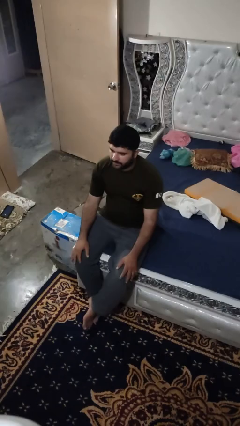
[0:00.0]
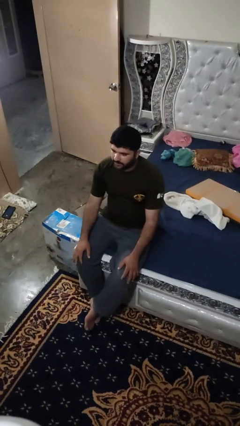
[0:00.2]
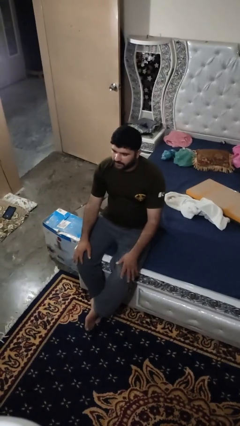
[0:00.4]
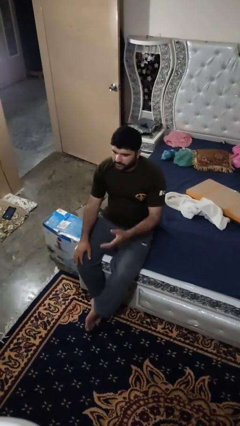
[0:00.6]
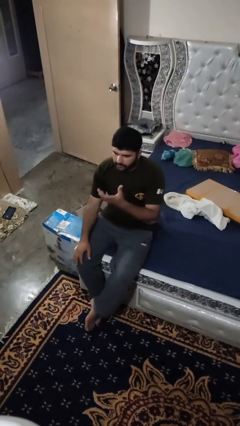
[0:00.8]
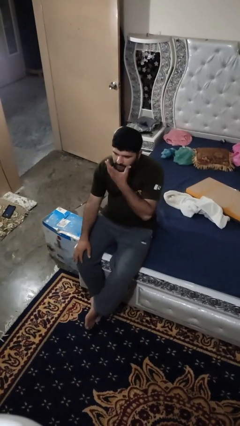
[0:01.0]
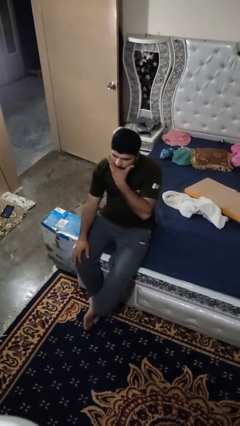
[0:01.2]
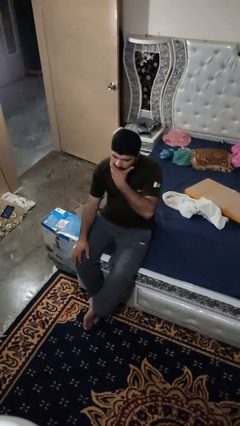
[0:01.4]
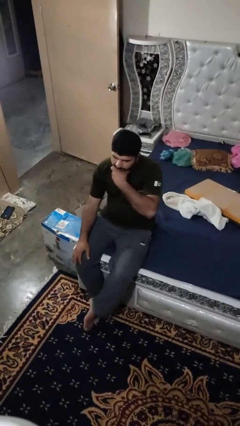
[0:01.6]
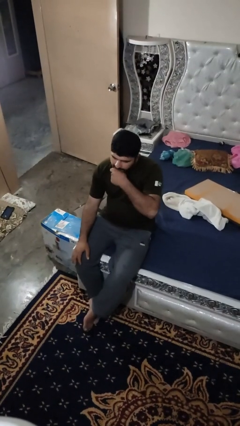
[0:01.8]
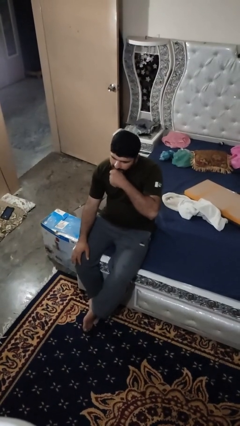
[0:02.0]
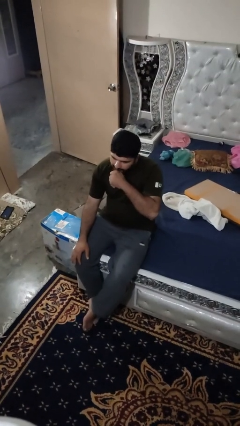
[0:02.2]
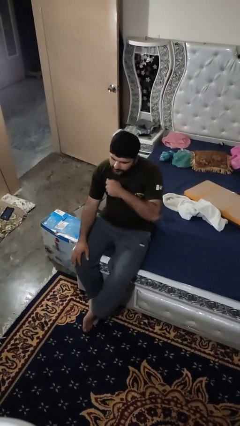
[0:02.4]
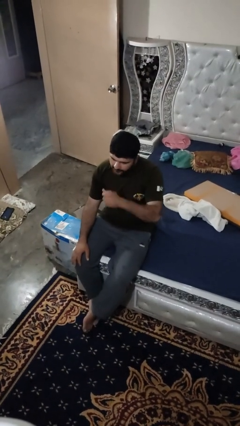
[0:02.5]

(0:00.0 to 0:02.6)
person strokes chin

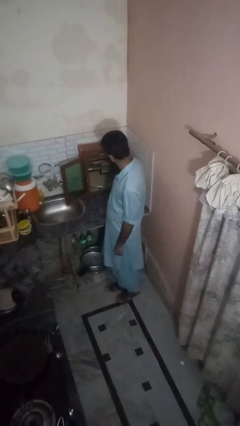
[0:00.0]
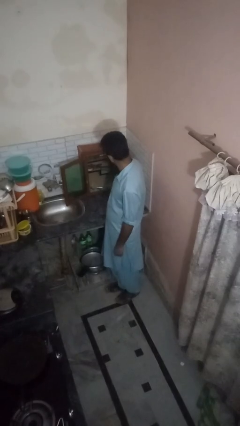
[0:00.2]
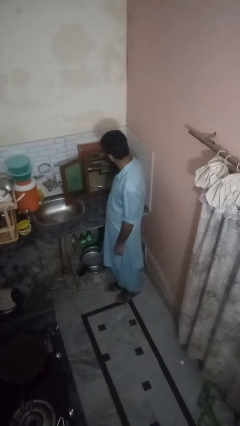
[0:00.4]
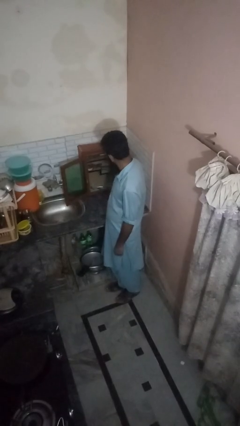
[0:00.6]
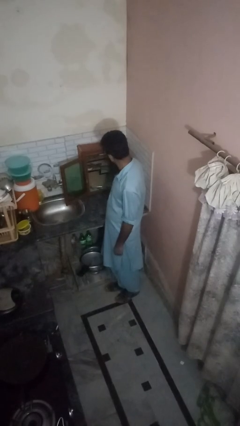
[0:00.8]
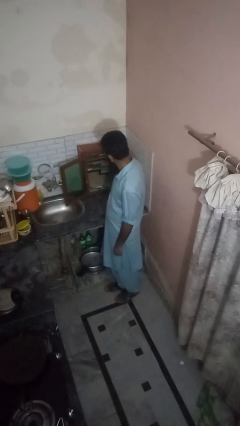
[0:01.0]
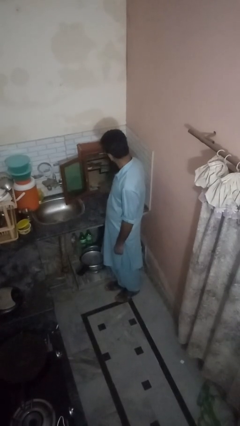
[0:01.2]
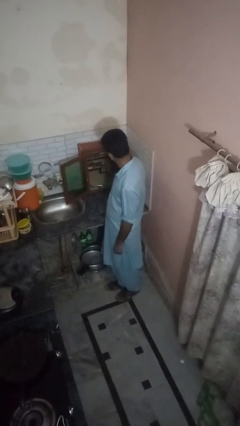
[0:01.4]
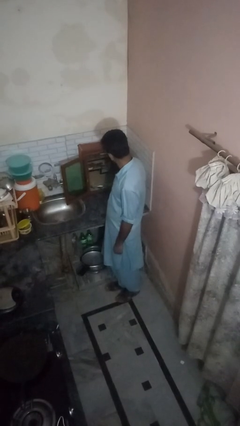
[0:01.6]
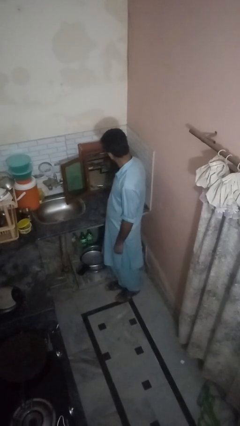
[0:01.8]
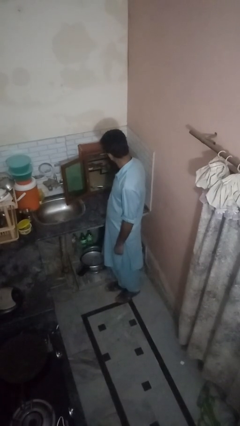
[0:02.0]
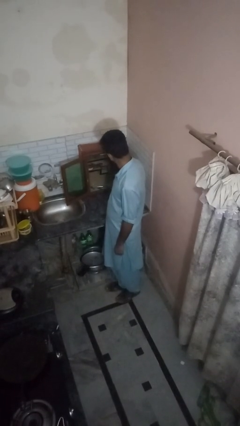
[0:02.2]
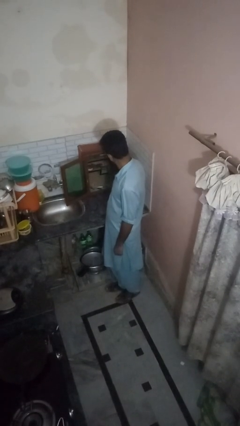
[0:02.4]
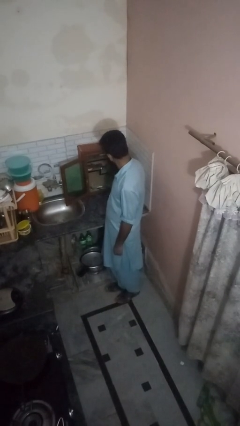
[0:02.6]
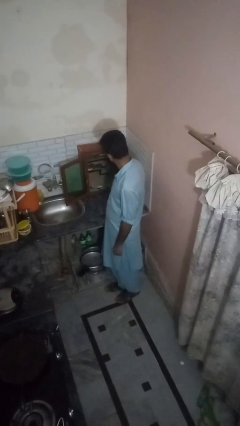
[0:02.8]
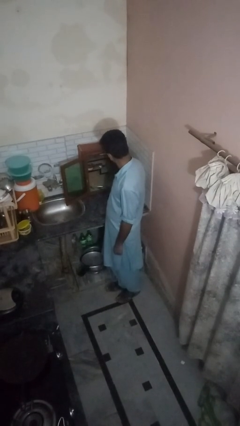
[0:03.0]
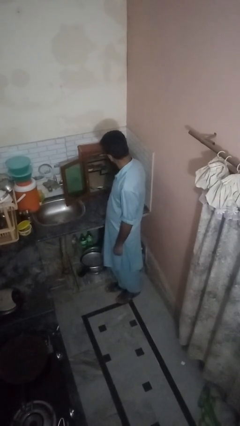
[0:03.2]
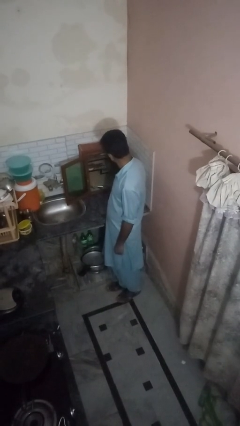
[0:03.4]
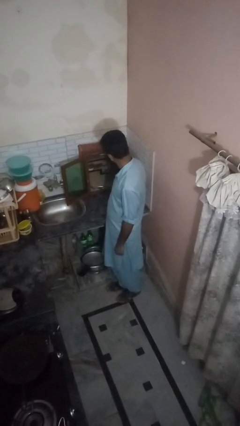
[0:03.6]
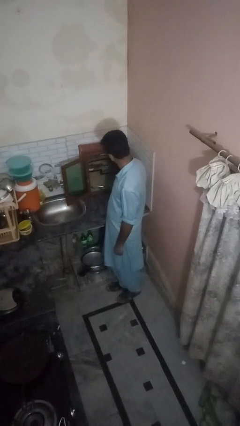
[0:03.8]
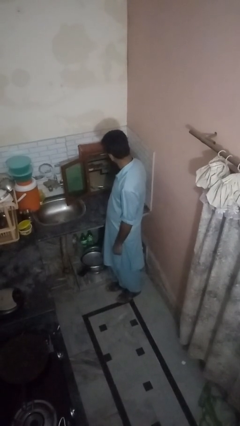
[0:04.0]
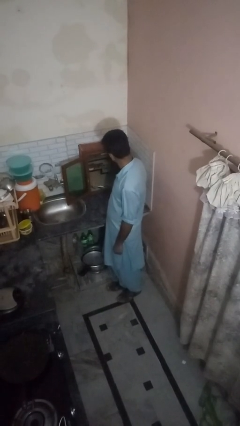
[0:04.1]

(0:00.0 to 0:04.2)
person takes object from kitchen drawer

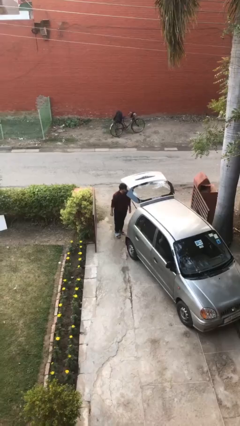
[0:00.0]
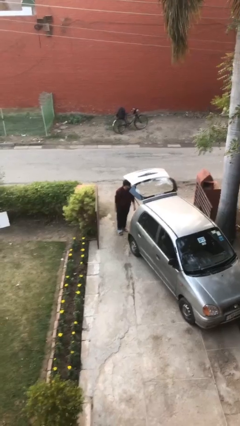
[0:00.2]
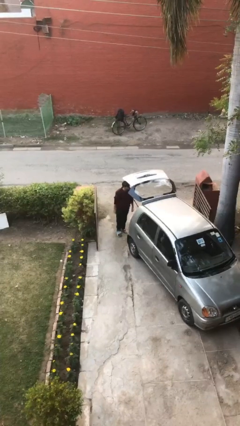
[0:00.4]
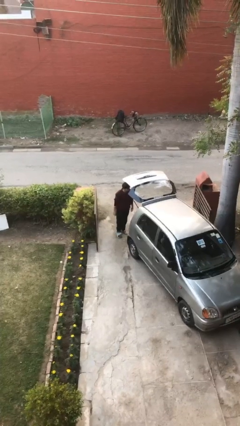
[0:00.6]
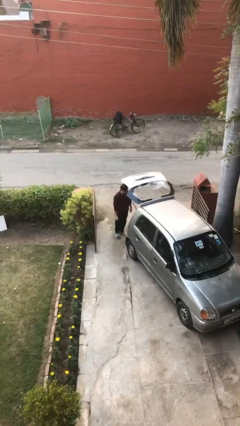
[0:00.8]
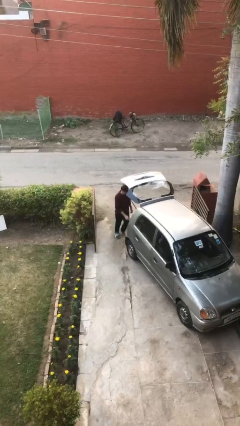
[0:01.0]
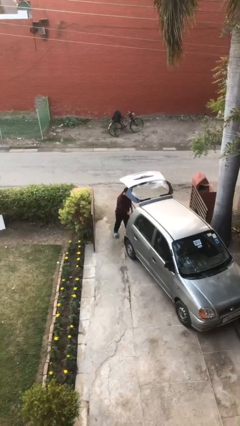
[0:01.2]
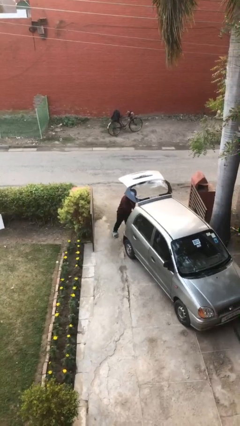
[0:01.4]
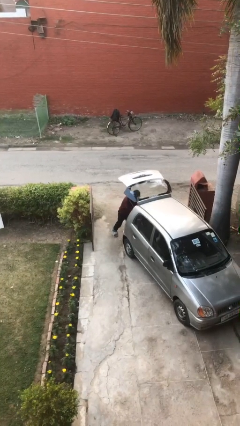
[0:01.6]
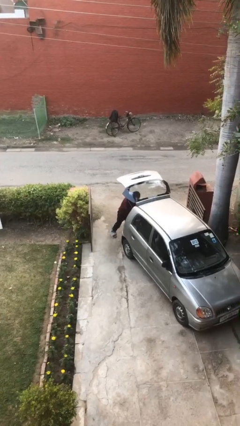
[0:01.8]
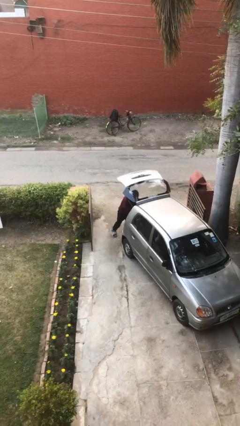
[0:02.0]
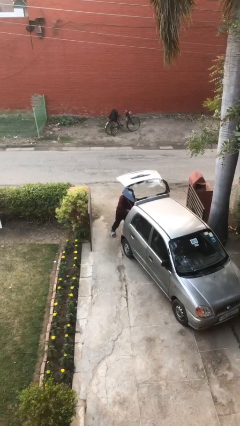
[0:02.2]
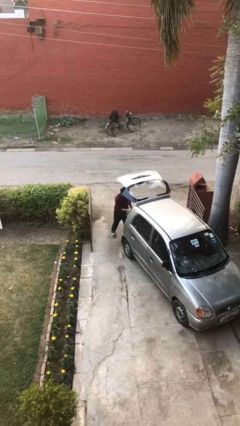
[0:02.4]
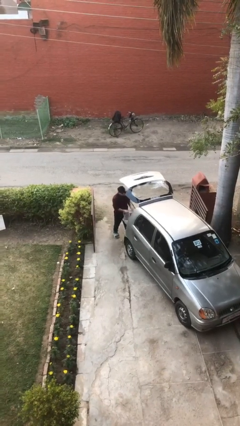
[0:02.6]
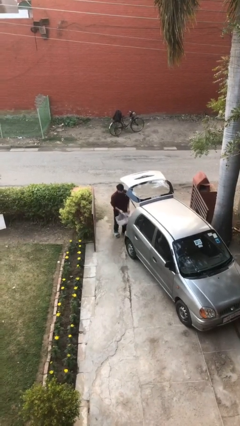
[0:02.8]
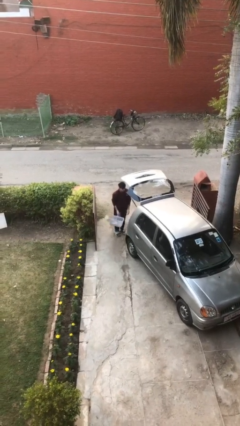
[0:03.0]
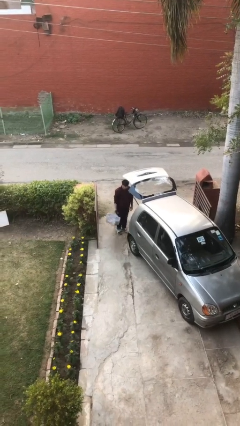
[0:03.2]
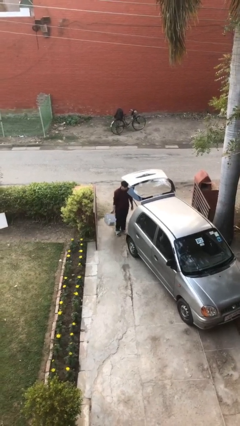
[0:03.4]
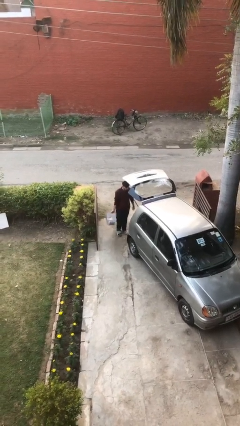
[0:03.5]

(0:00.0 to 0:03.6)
person unloads car

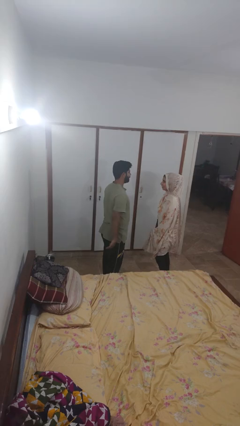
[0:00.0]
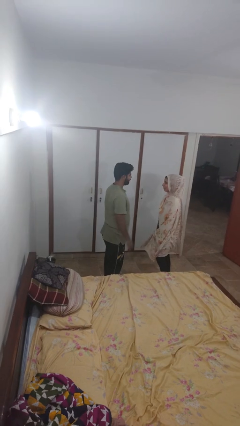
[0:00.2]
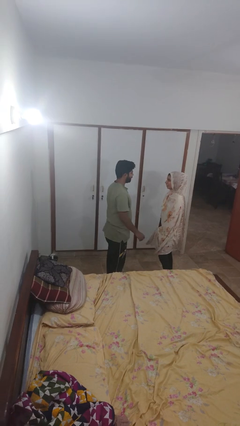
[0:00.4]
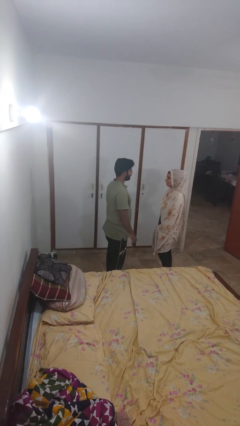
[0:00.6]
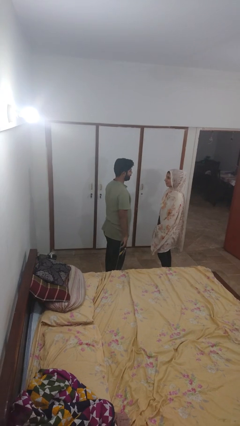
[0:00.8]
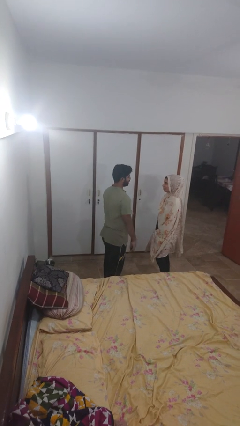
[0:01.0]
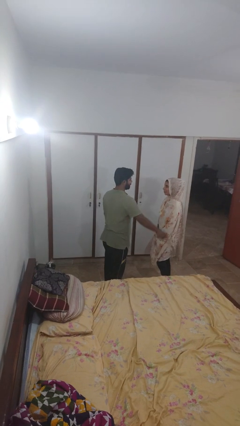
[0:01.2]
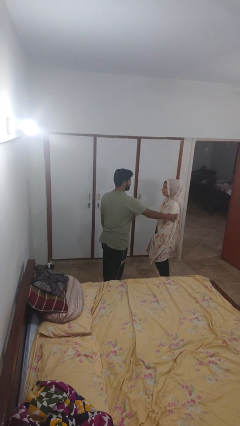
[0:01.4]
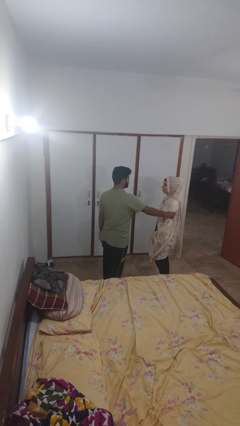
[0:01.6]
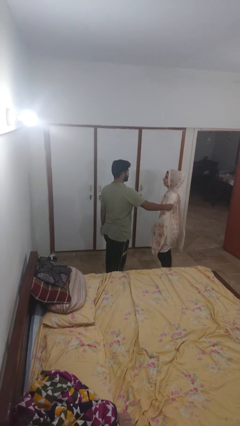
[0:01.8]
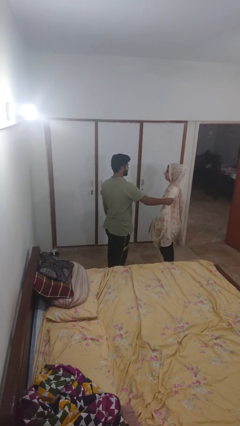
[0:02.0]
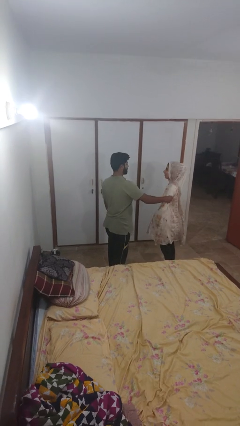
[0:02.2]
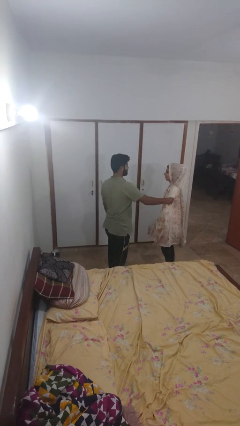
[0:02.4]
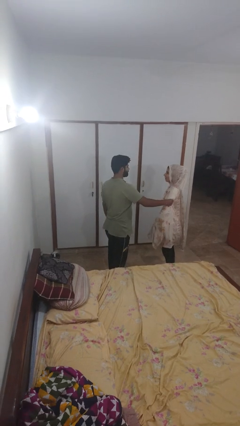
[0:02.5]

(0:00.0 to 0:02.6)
person grabs person by bicep

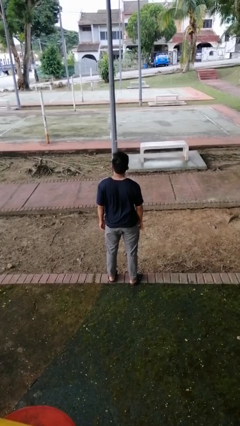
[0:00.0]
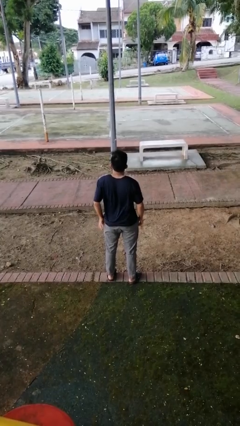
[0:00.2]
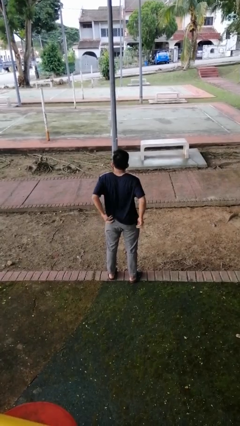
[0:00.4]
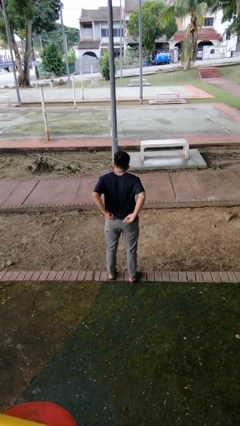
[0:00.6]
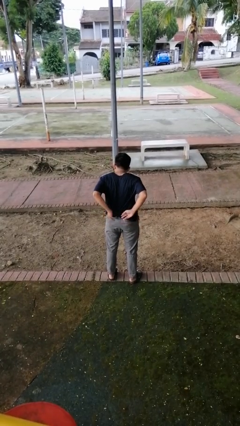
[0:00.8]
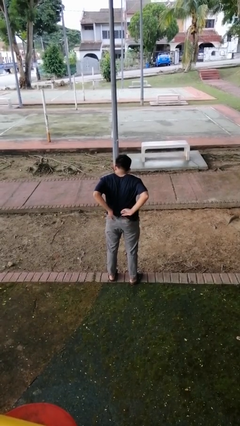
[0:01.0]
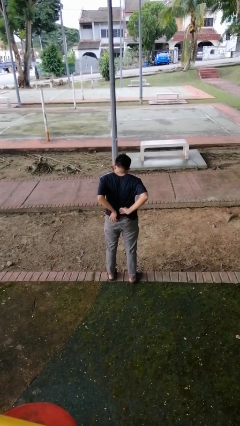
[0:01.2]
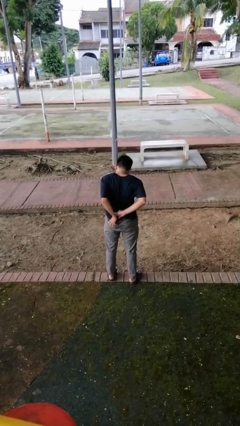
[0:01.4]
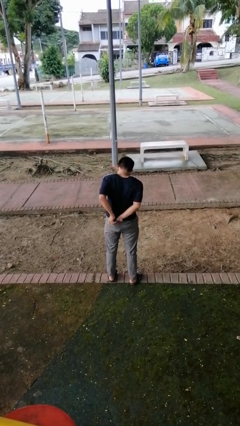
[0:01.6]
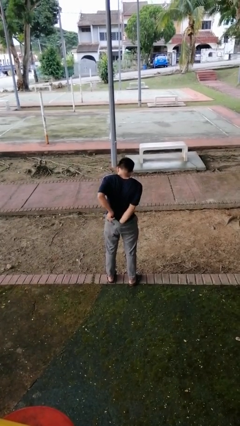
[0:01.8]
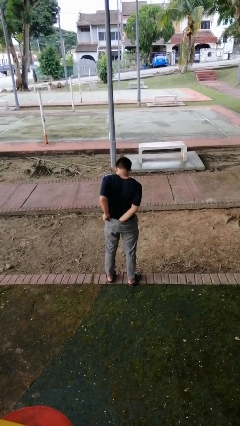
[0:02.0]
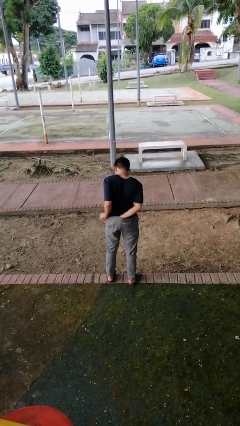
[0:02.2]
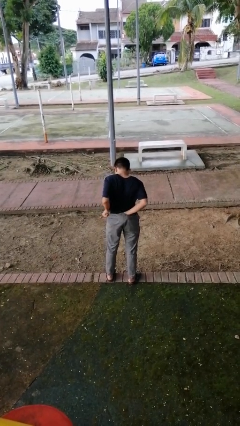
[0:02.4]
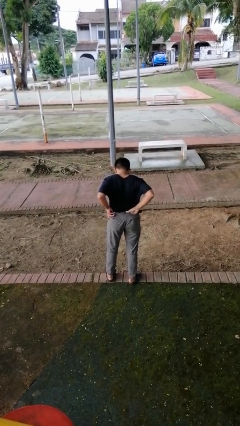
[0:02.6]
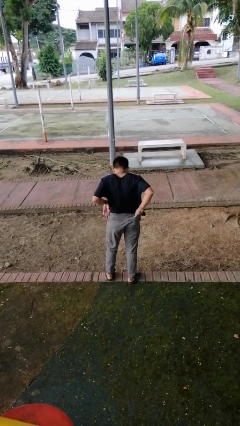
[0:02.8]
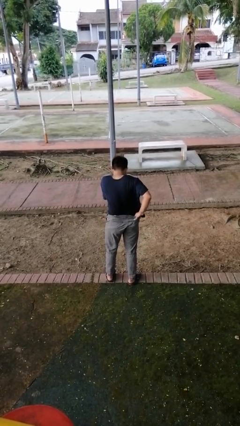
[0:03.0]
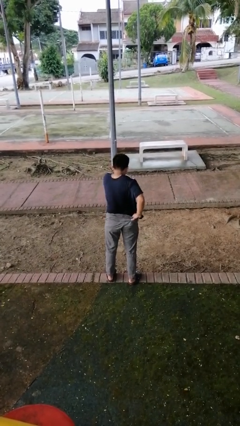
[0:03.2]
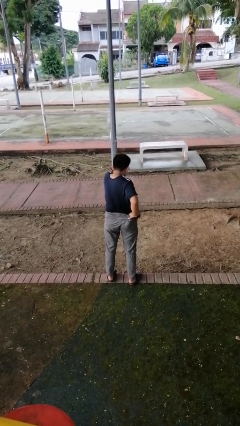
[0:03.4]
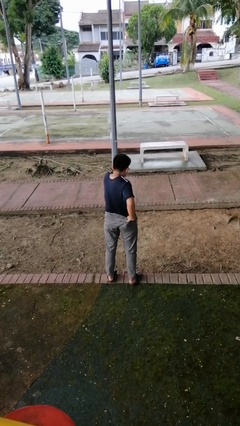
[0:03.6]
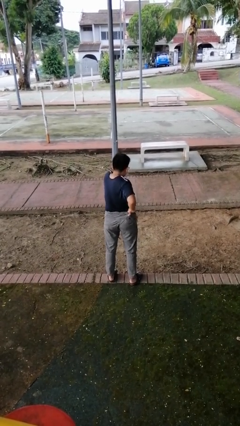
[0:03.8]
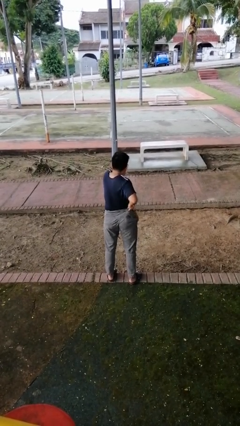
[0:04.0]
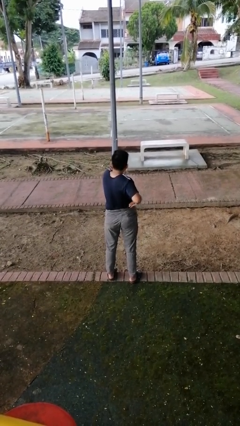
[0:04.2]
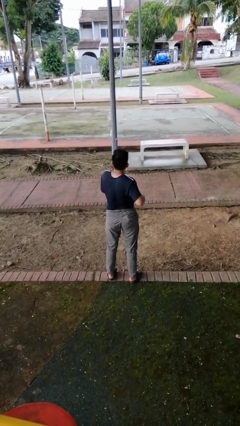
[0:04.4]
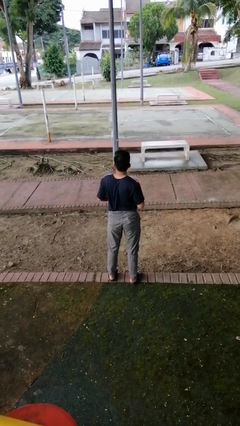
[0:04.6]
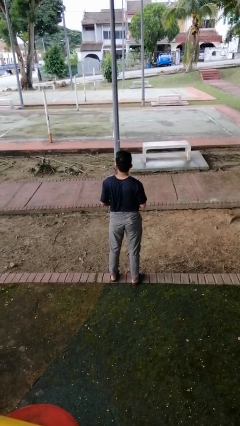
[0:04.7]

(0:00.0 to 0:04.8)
person tucks in shirt
